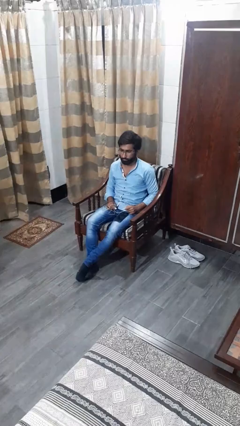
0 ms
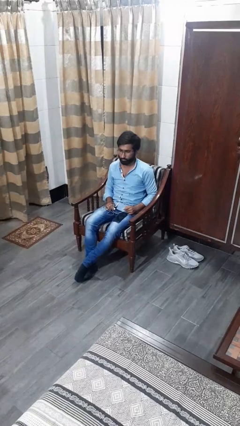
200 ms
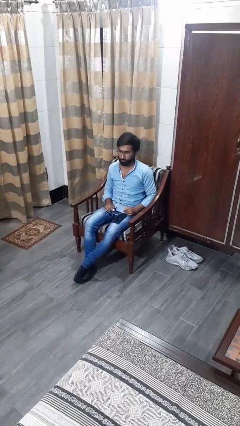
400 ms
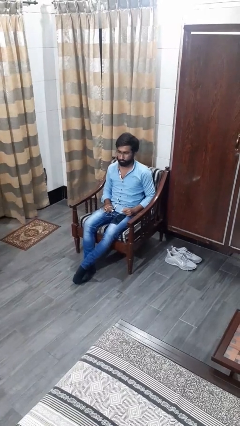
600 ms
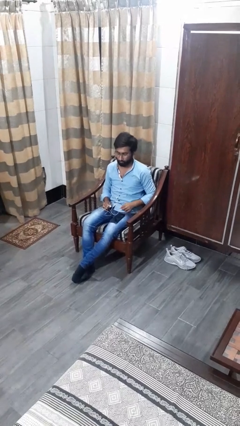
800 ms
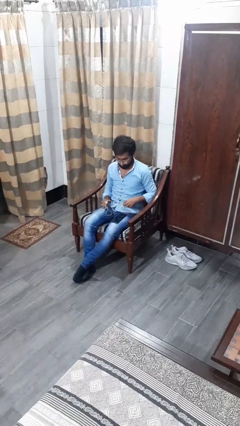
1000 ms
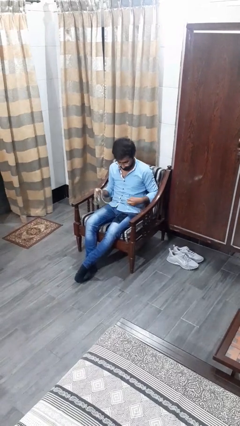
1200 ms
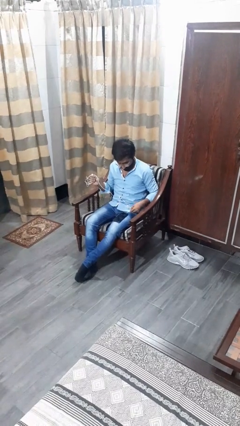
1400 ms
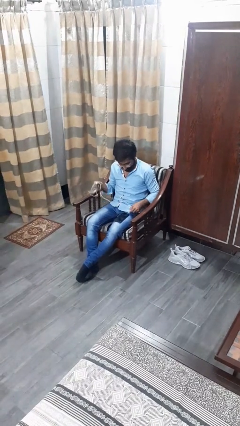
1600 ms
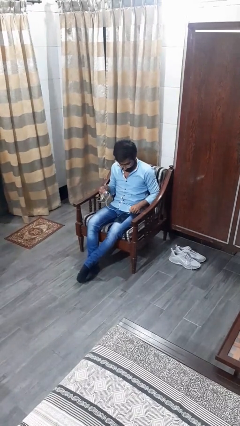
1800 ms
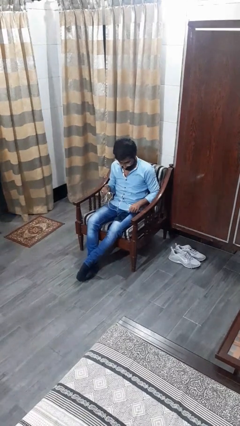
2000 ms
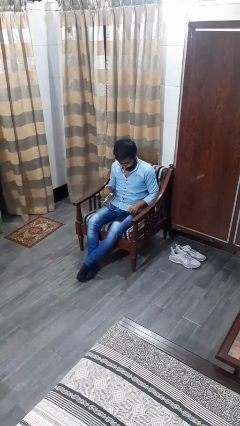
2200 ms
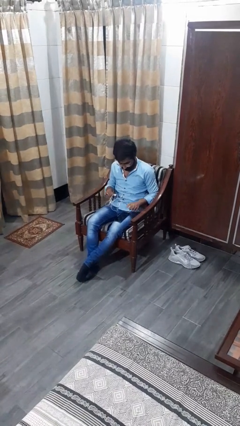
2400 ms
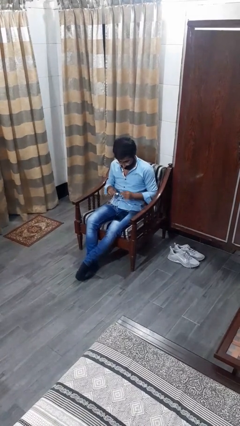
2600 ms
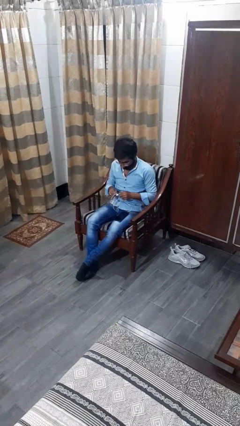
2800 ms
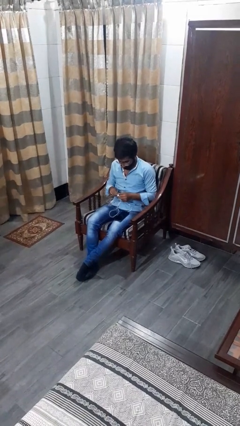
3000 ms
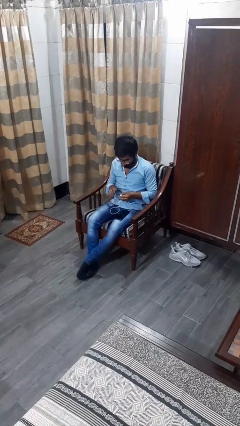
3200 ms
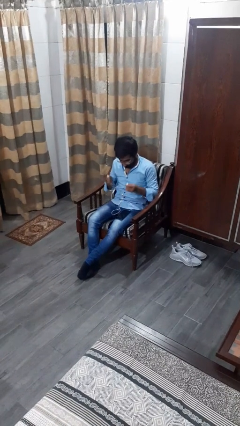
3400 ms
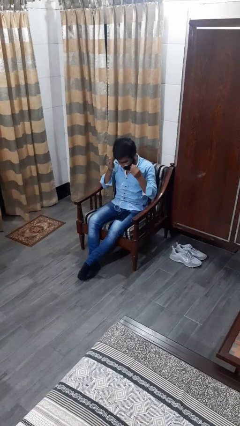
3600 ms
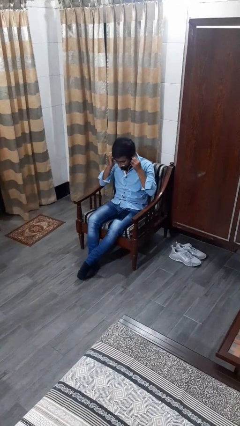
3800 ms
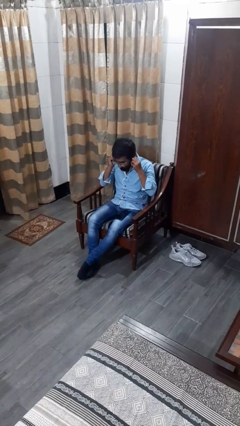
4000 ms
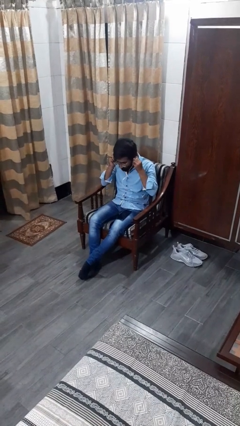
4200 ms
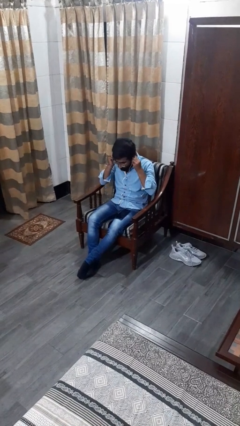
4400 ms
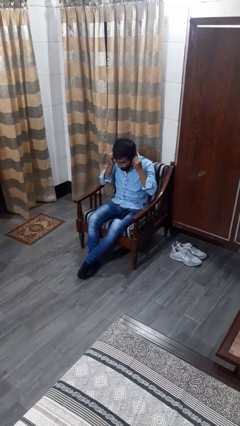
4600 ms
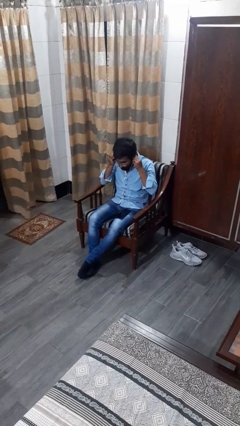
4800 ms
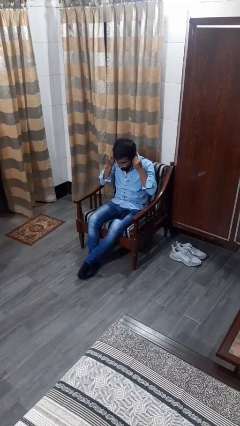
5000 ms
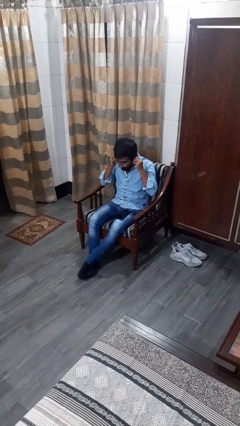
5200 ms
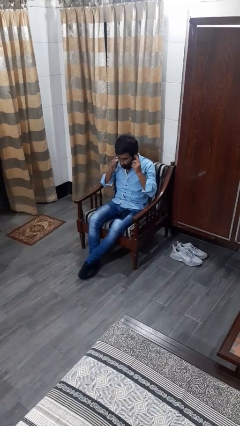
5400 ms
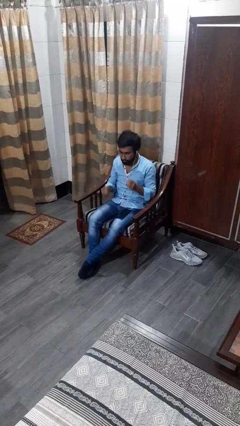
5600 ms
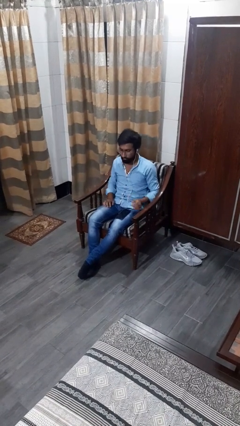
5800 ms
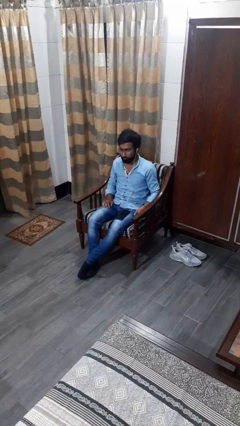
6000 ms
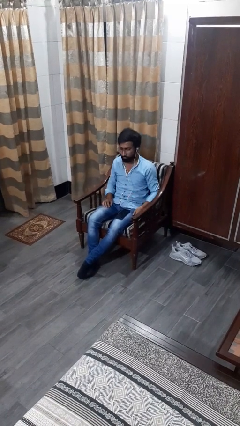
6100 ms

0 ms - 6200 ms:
person puts on headphones

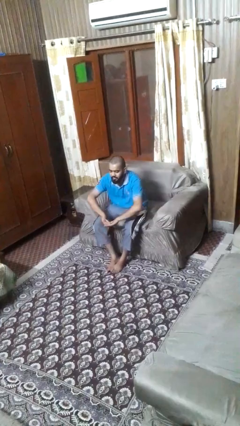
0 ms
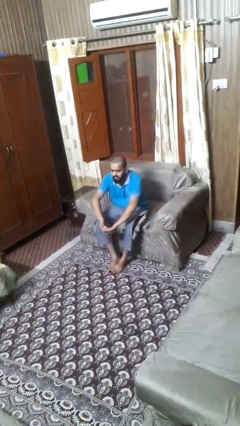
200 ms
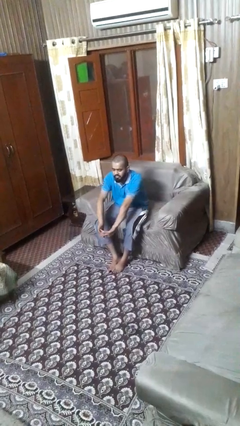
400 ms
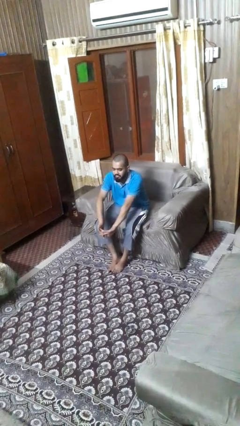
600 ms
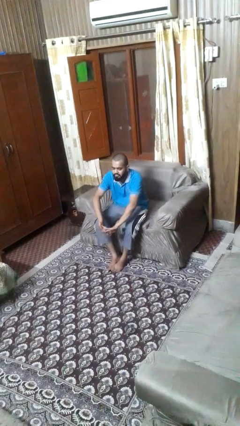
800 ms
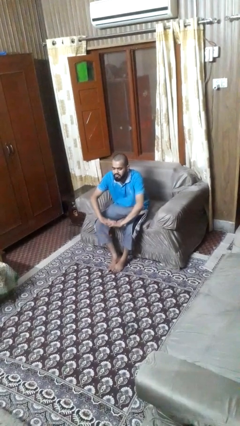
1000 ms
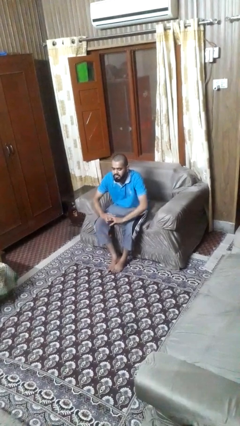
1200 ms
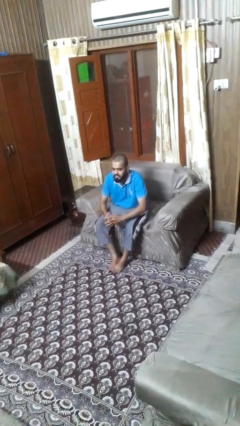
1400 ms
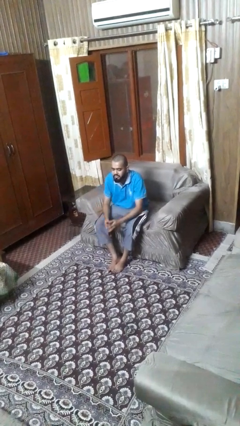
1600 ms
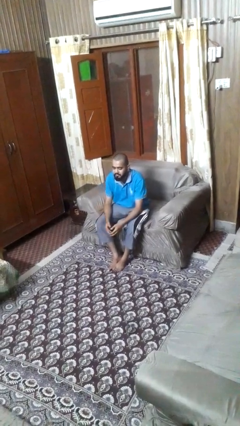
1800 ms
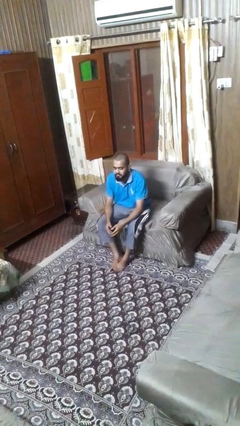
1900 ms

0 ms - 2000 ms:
person cracks knuckles

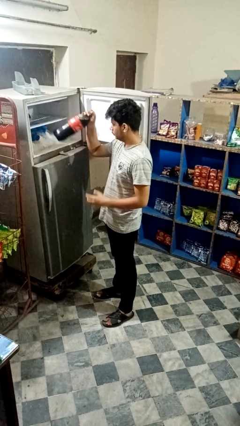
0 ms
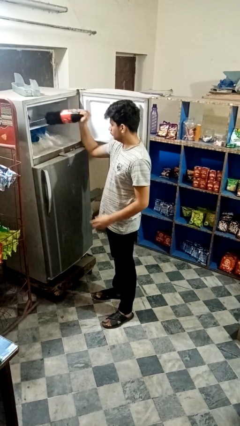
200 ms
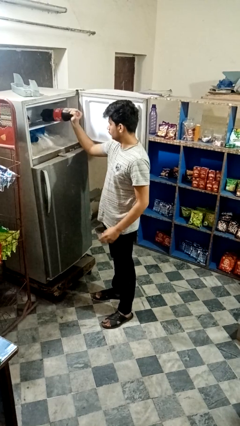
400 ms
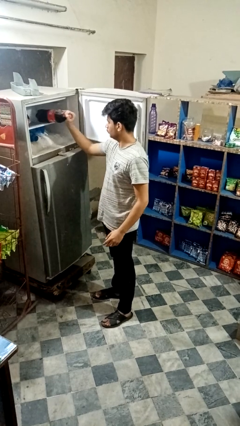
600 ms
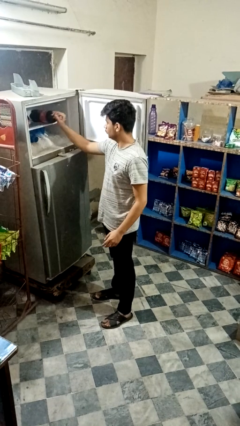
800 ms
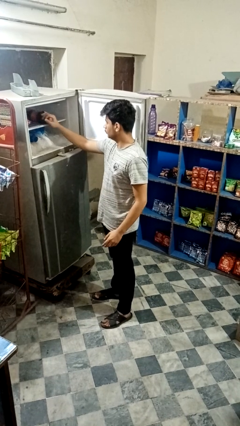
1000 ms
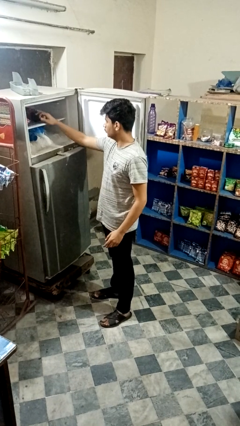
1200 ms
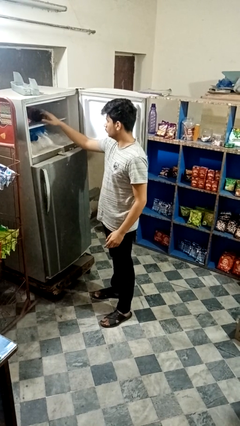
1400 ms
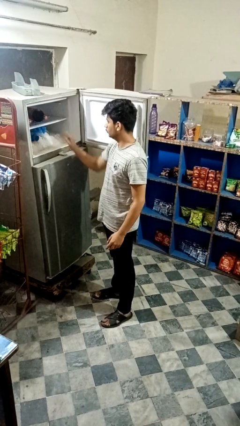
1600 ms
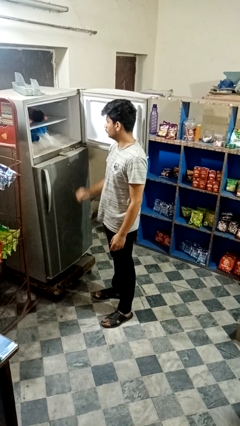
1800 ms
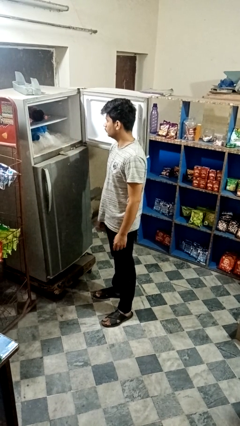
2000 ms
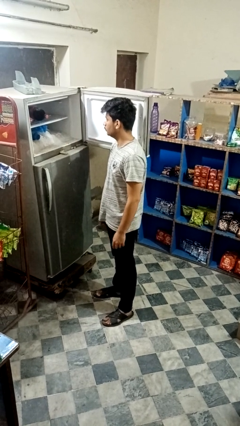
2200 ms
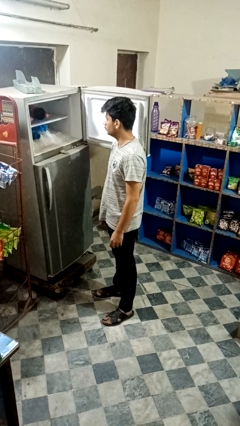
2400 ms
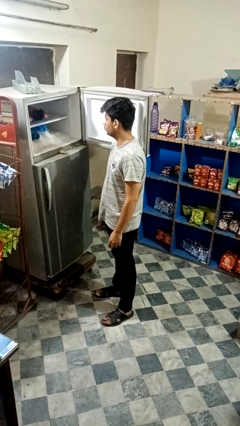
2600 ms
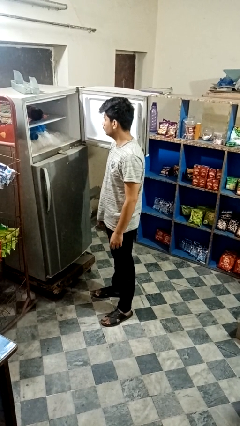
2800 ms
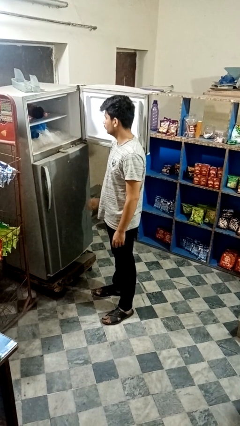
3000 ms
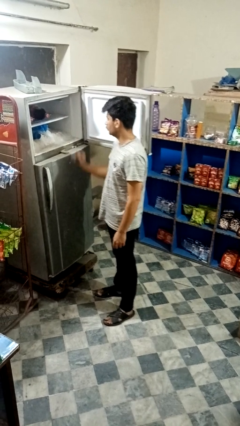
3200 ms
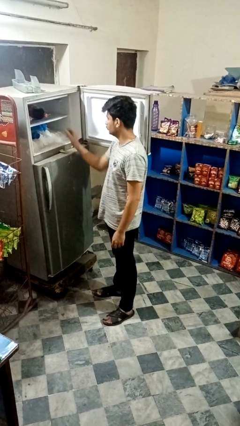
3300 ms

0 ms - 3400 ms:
person puts object into refrigerator

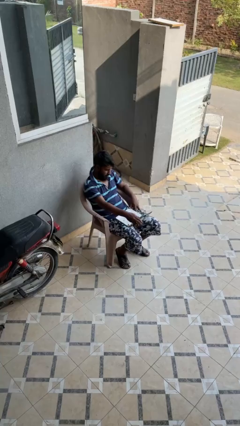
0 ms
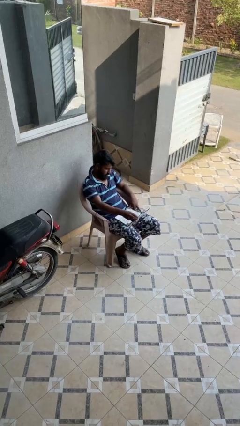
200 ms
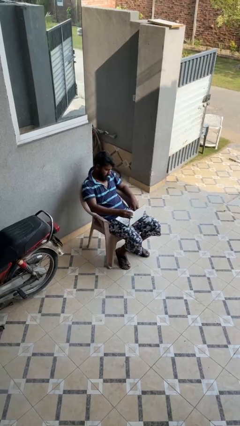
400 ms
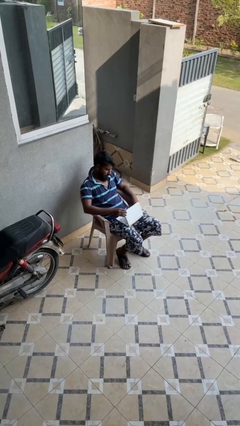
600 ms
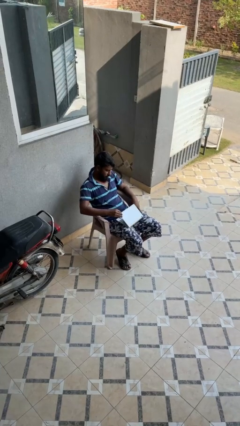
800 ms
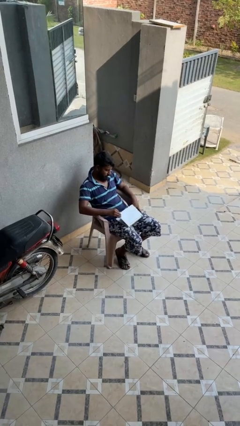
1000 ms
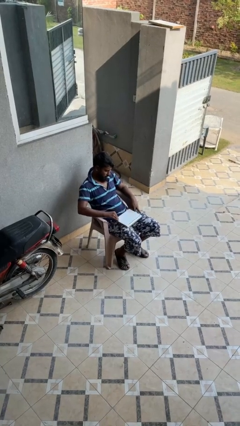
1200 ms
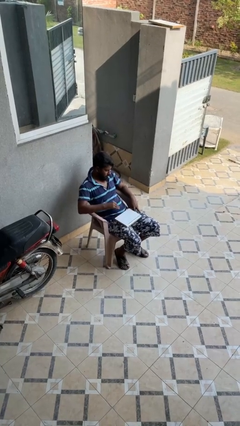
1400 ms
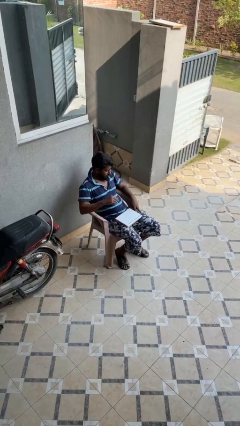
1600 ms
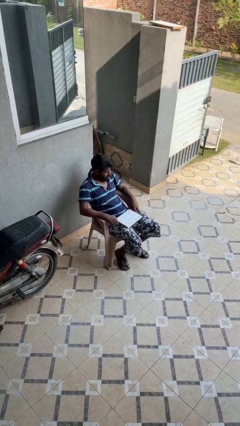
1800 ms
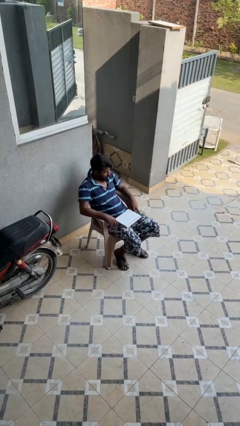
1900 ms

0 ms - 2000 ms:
person closes laptop

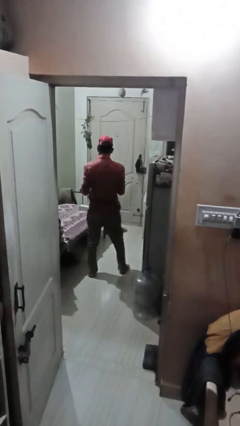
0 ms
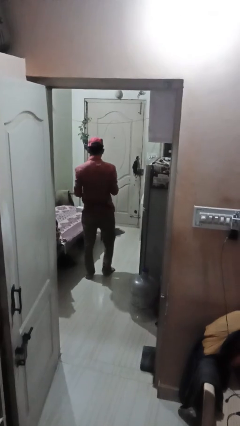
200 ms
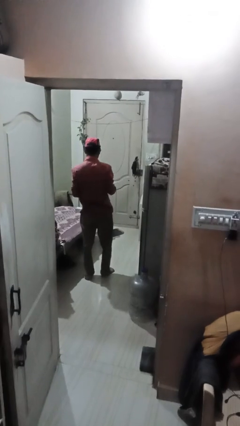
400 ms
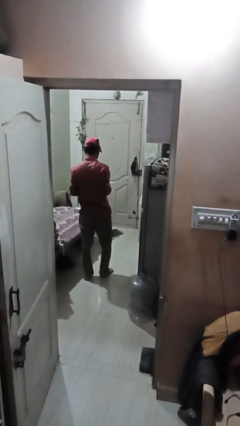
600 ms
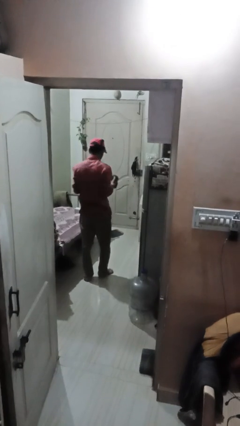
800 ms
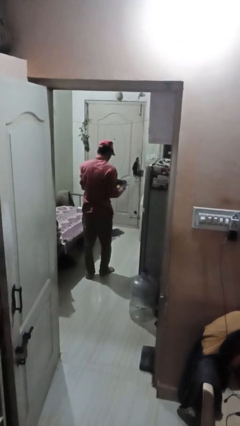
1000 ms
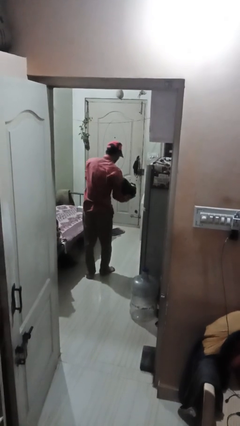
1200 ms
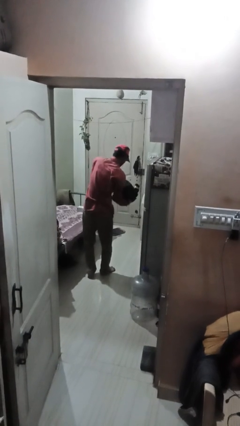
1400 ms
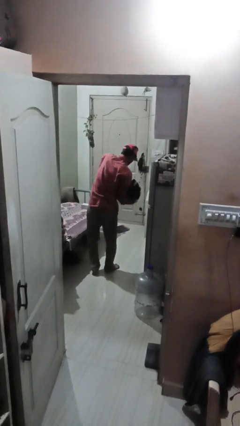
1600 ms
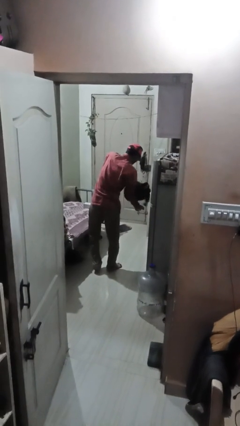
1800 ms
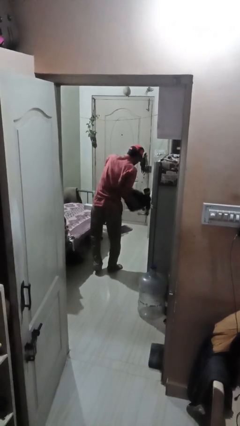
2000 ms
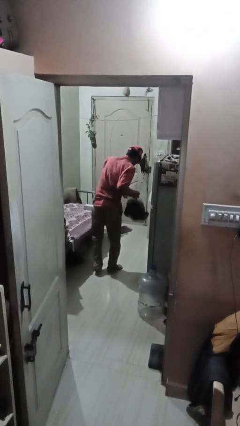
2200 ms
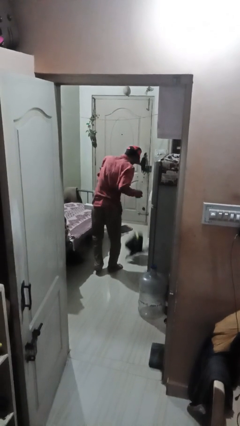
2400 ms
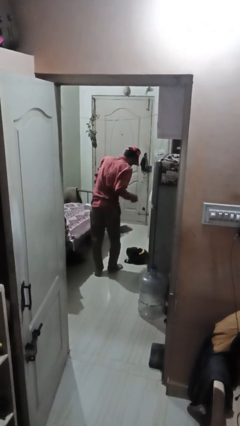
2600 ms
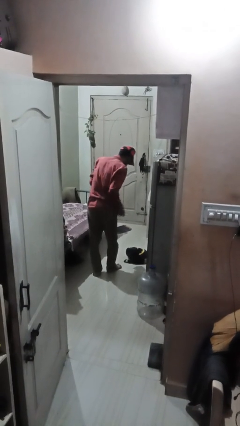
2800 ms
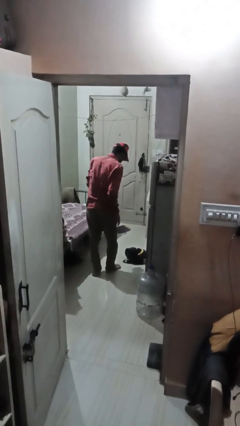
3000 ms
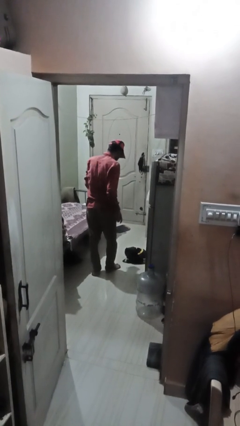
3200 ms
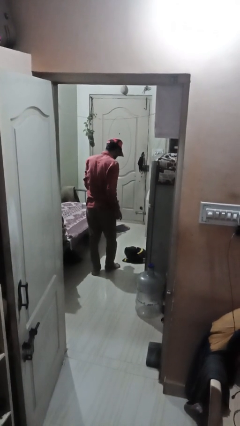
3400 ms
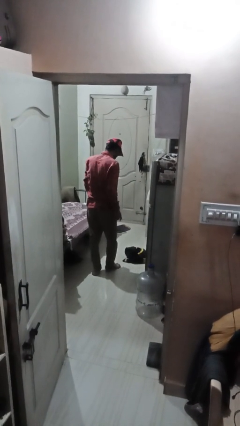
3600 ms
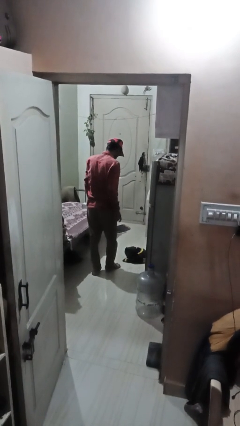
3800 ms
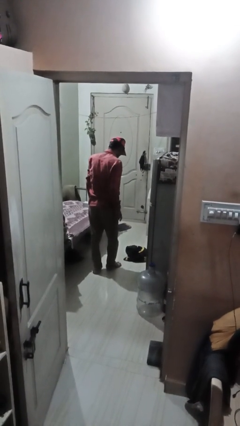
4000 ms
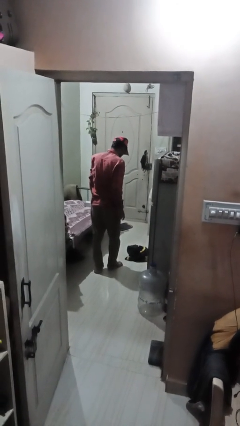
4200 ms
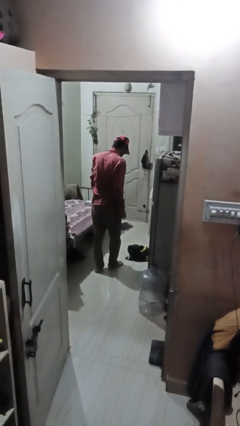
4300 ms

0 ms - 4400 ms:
person drops object
